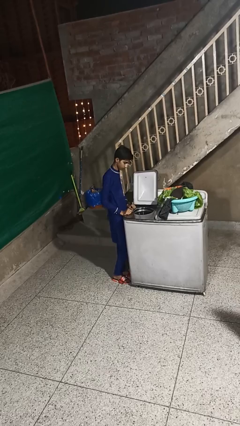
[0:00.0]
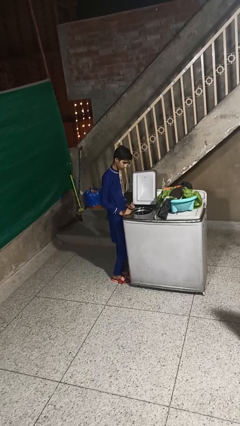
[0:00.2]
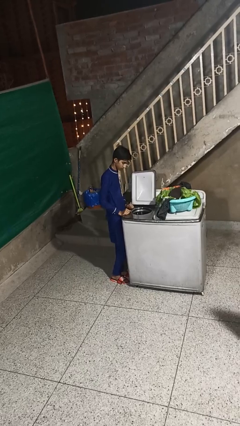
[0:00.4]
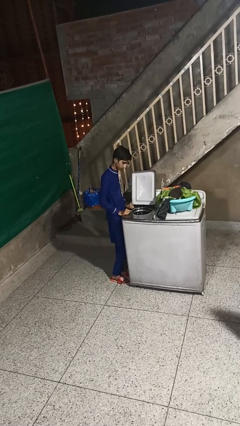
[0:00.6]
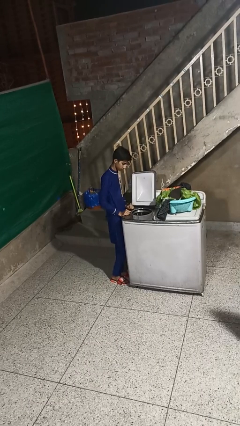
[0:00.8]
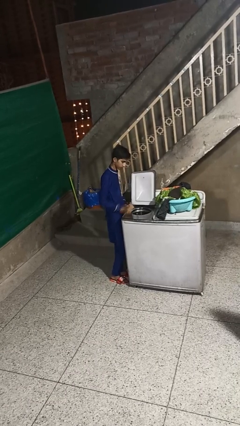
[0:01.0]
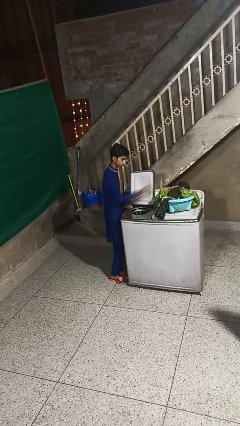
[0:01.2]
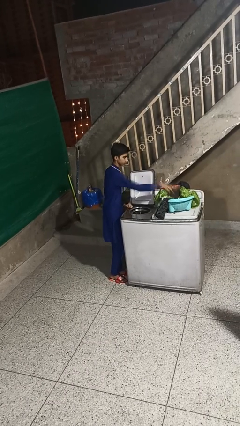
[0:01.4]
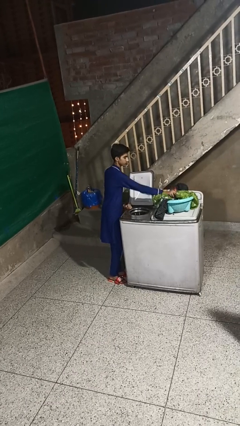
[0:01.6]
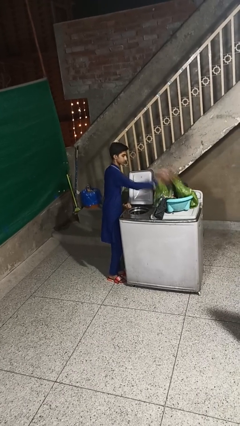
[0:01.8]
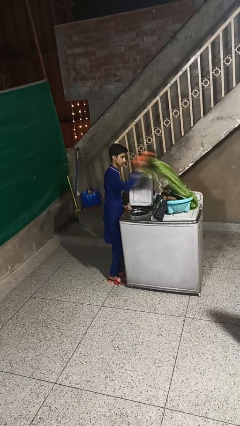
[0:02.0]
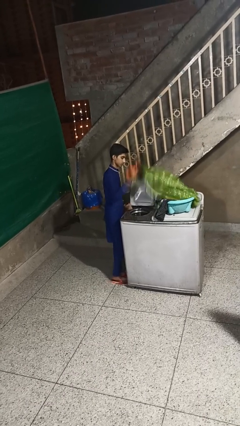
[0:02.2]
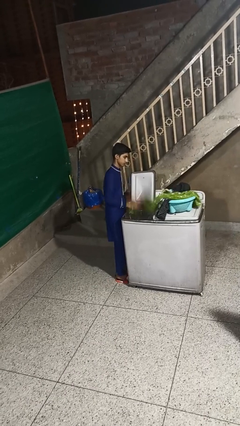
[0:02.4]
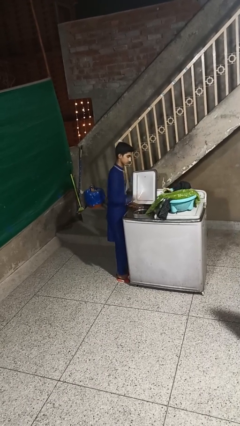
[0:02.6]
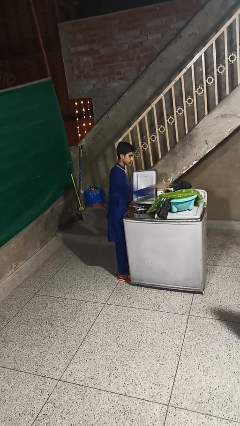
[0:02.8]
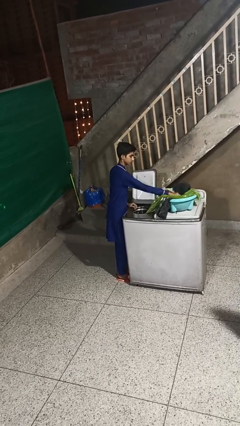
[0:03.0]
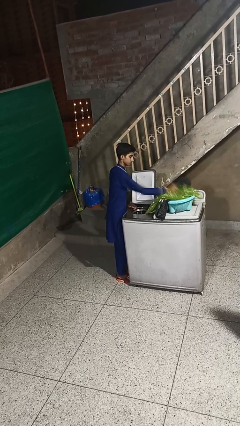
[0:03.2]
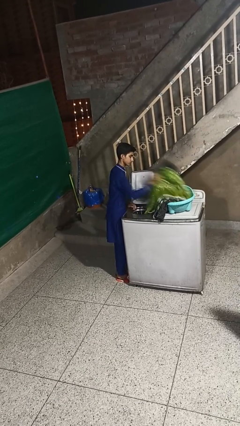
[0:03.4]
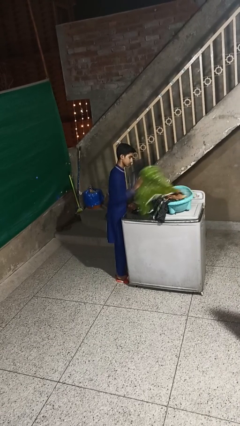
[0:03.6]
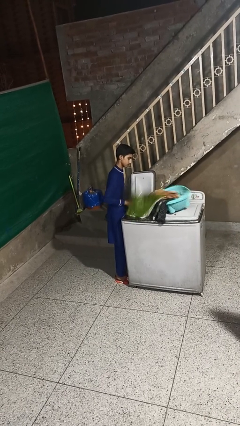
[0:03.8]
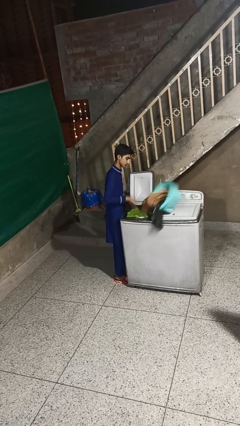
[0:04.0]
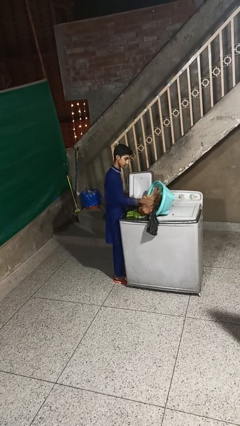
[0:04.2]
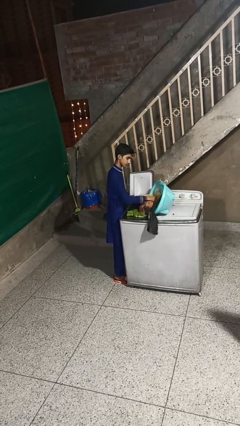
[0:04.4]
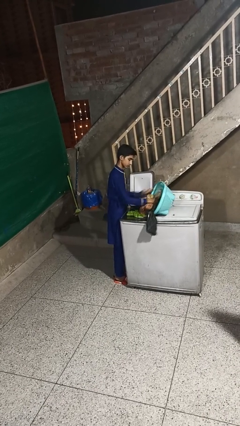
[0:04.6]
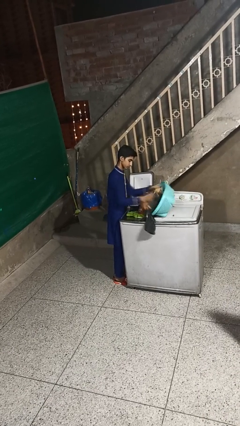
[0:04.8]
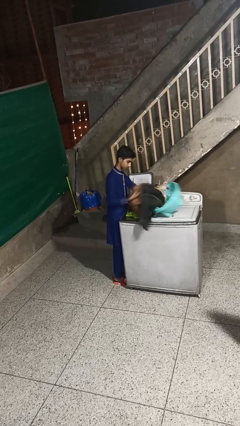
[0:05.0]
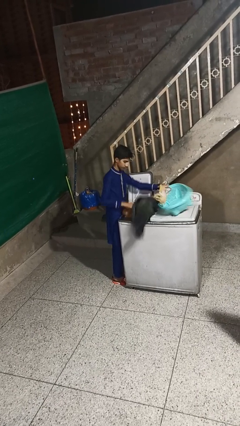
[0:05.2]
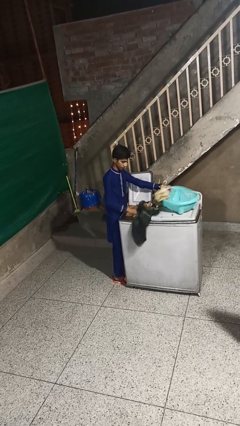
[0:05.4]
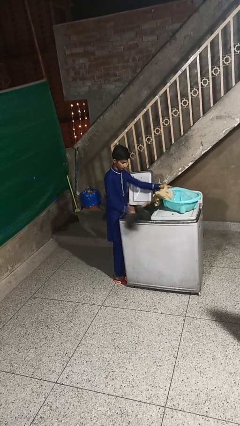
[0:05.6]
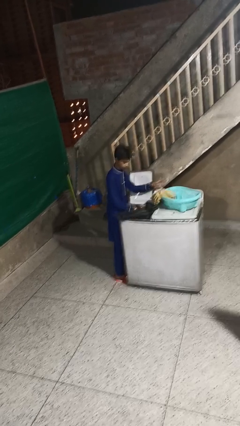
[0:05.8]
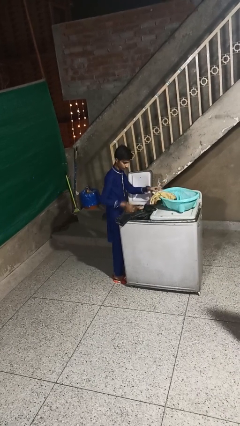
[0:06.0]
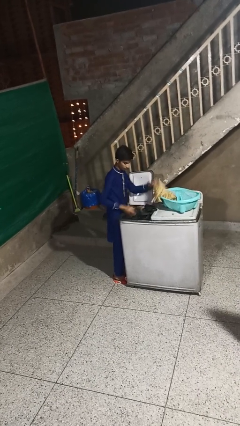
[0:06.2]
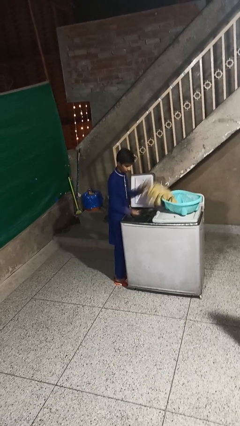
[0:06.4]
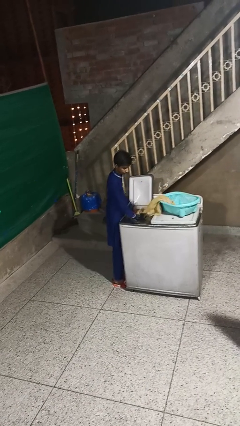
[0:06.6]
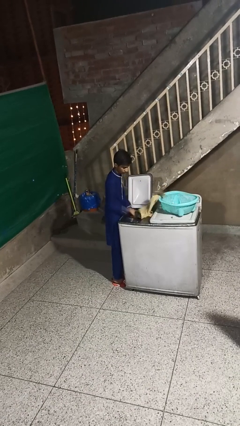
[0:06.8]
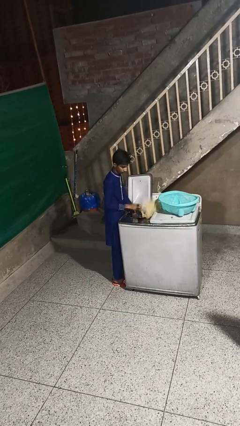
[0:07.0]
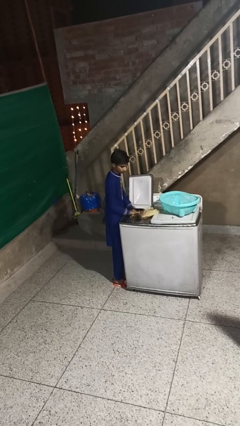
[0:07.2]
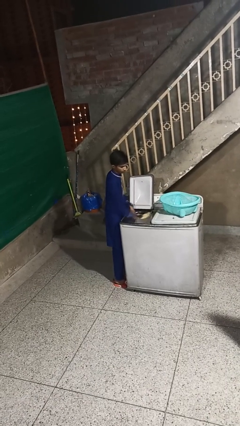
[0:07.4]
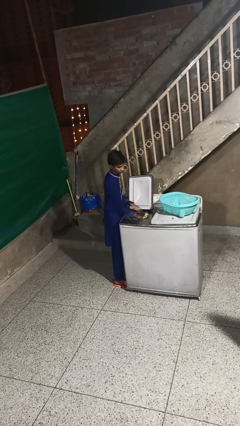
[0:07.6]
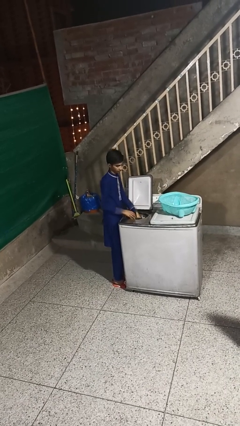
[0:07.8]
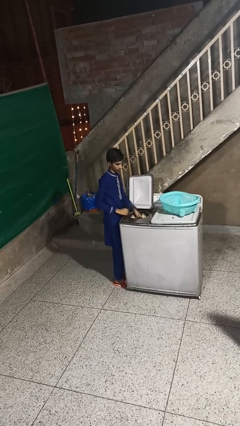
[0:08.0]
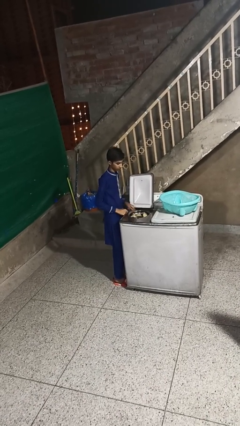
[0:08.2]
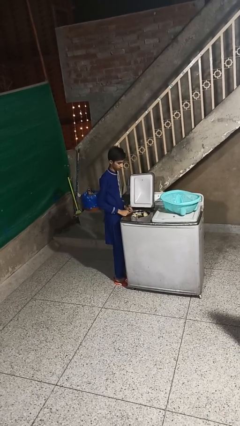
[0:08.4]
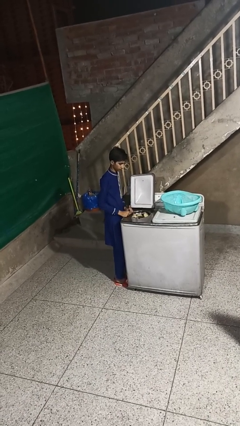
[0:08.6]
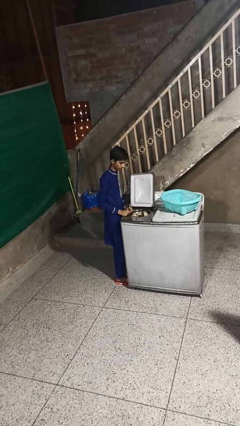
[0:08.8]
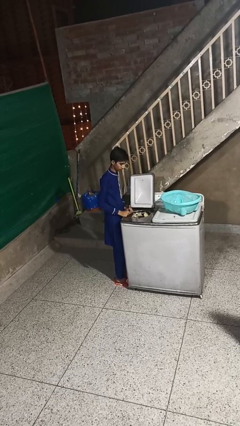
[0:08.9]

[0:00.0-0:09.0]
person loads dryer

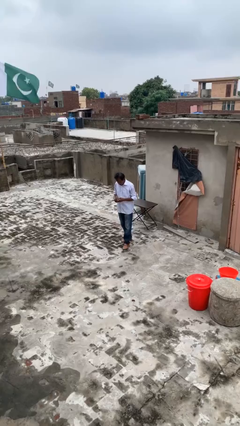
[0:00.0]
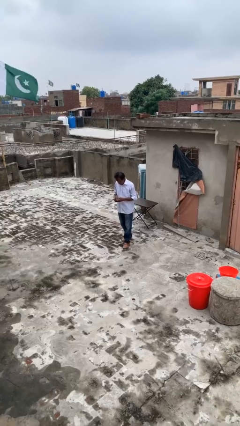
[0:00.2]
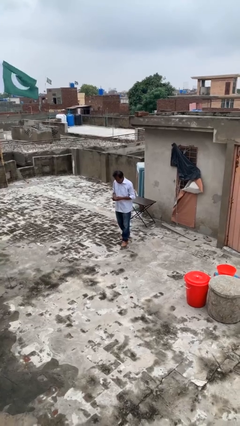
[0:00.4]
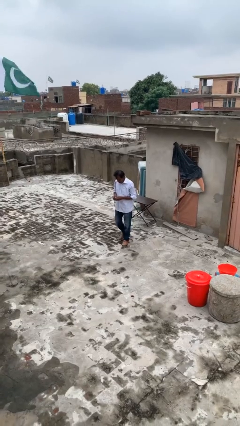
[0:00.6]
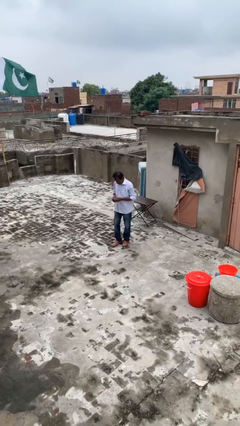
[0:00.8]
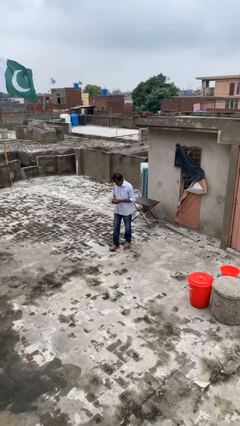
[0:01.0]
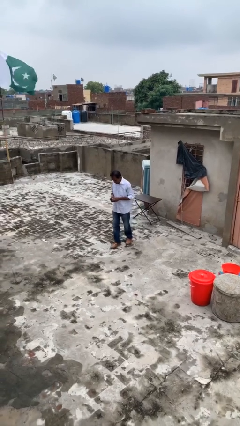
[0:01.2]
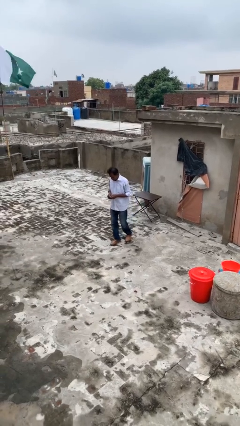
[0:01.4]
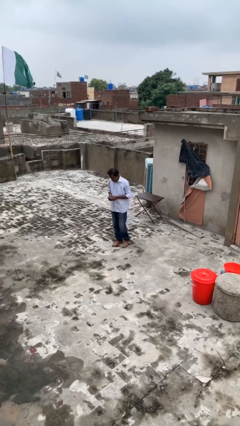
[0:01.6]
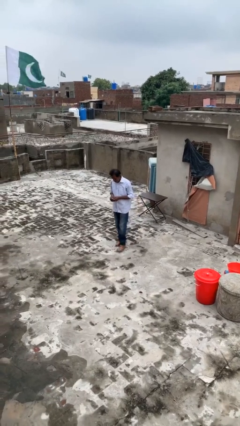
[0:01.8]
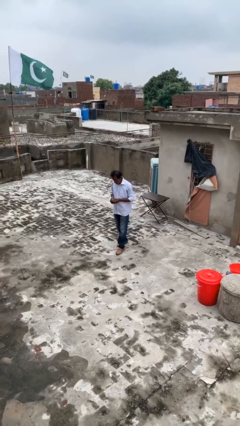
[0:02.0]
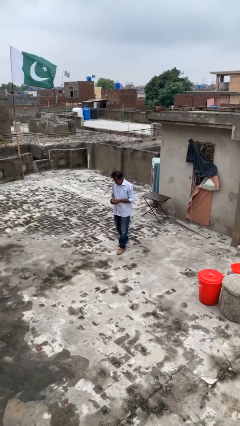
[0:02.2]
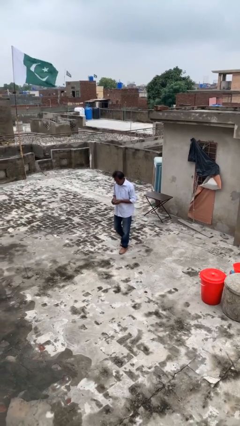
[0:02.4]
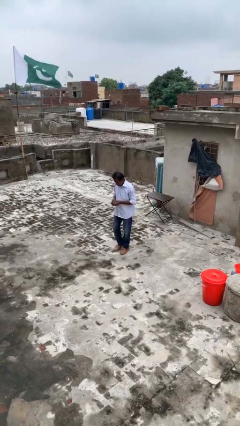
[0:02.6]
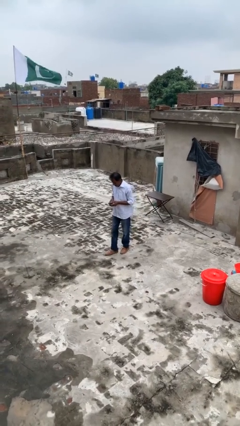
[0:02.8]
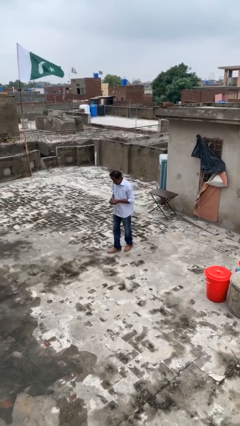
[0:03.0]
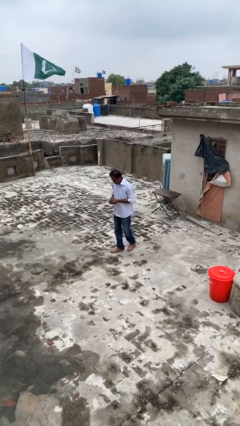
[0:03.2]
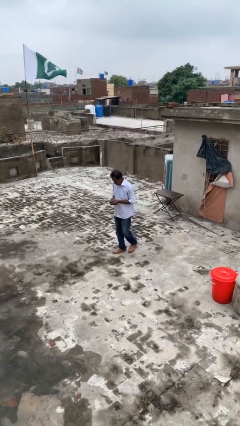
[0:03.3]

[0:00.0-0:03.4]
person texts on phone

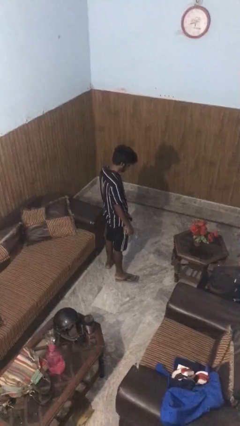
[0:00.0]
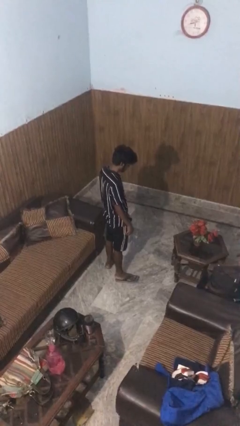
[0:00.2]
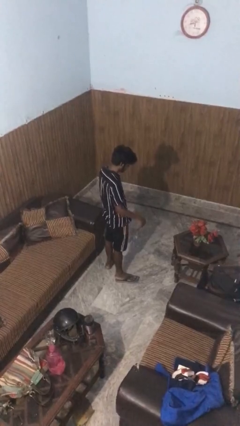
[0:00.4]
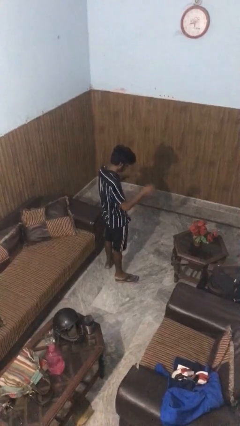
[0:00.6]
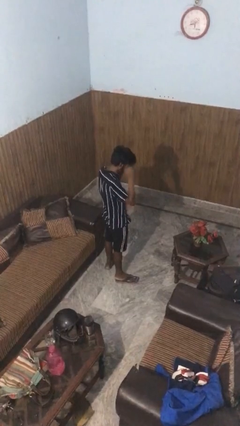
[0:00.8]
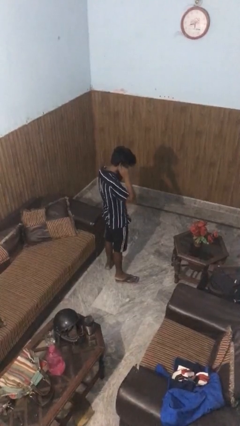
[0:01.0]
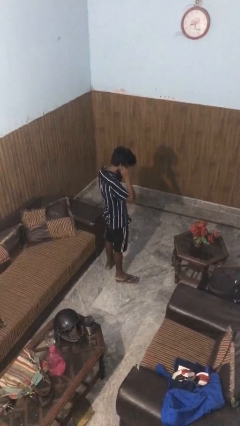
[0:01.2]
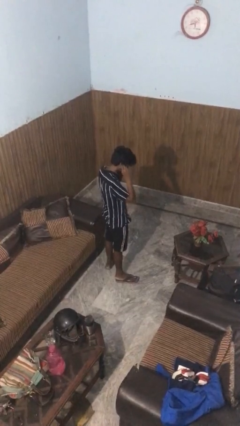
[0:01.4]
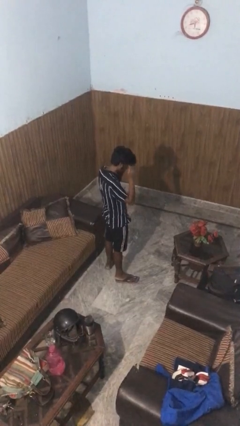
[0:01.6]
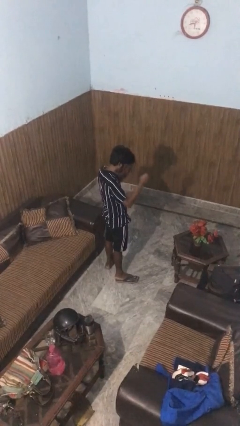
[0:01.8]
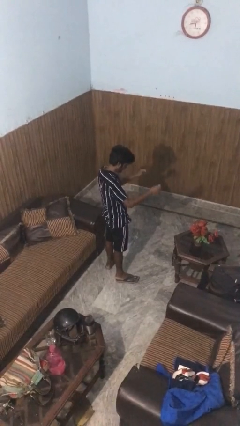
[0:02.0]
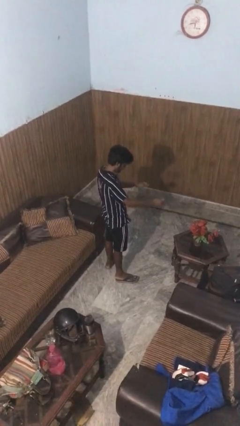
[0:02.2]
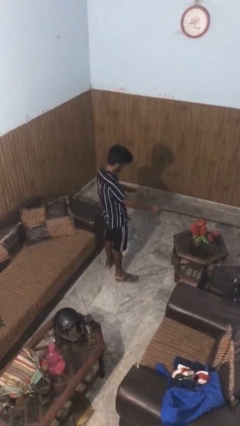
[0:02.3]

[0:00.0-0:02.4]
person takes off headphones

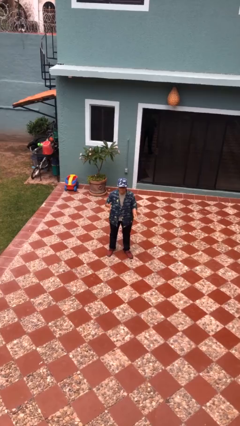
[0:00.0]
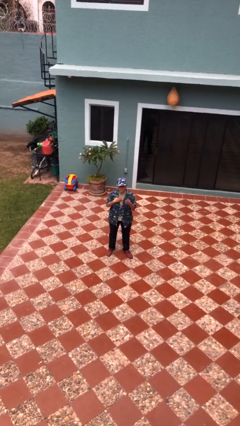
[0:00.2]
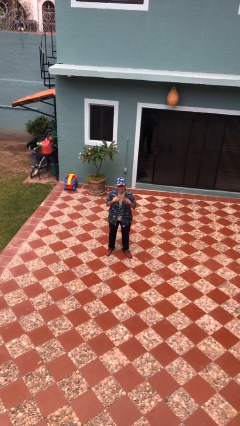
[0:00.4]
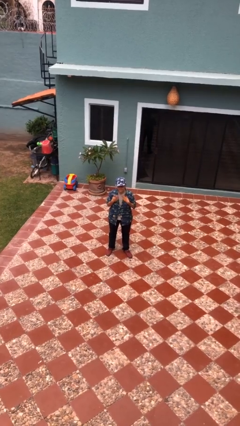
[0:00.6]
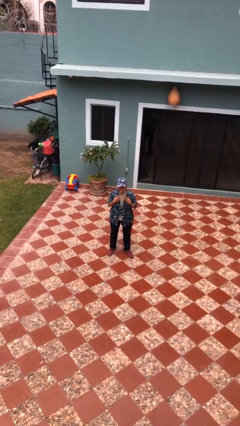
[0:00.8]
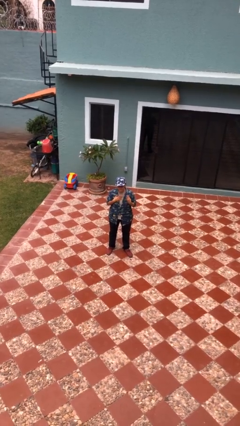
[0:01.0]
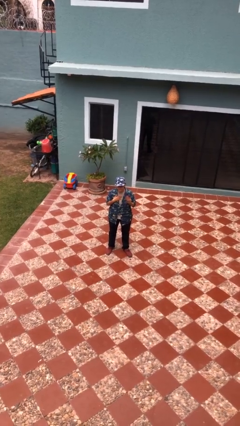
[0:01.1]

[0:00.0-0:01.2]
person drums on chest

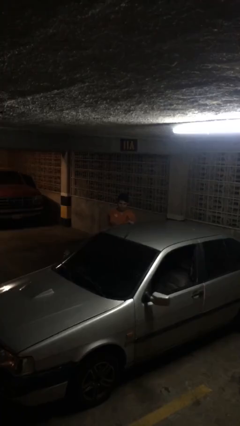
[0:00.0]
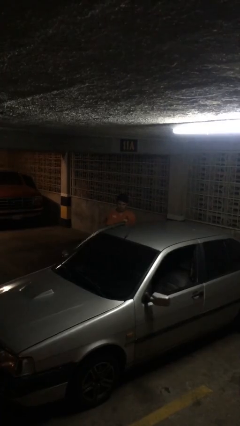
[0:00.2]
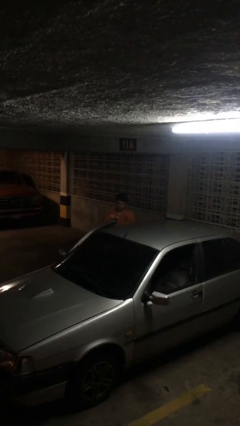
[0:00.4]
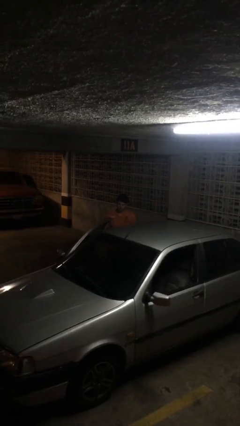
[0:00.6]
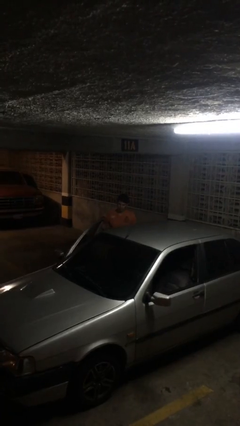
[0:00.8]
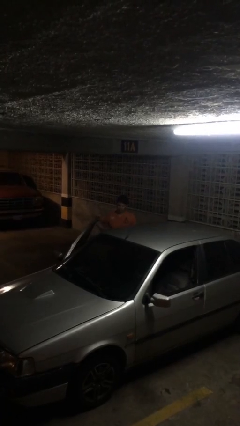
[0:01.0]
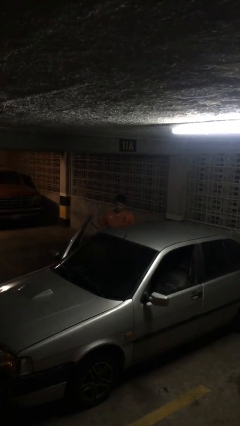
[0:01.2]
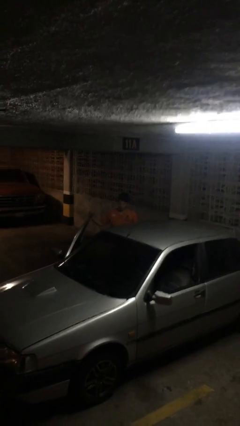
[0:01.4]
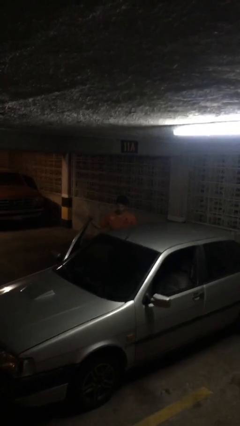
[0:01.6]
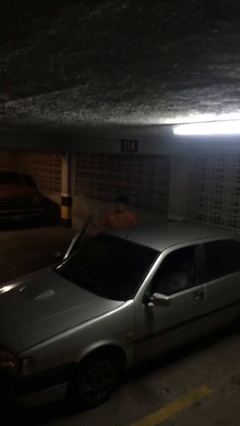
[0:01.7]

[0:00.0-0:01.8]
person opens car door
